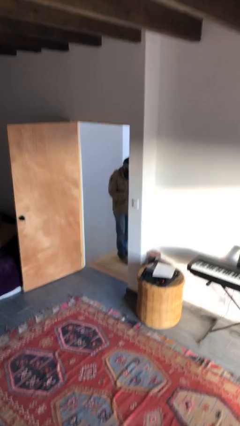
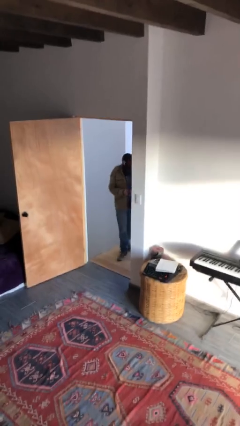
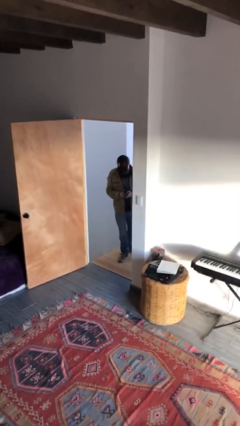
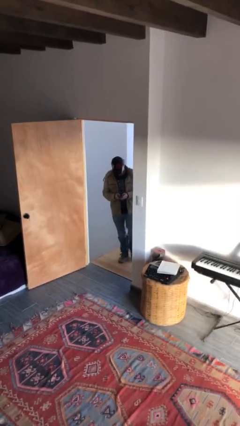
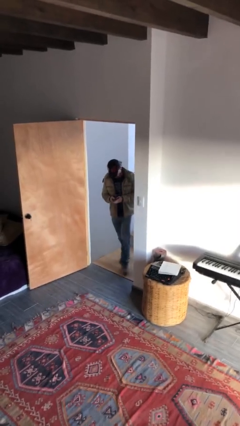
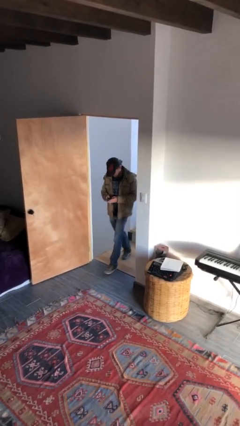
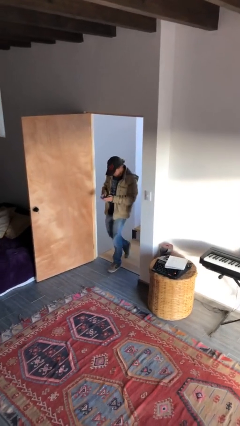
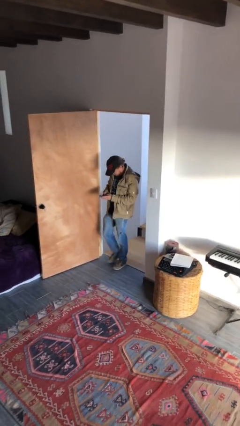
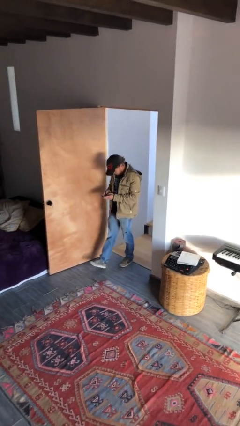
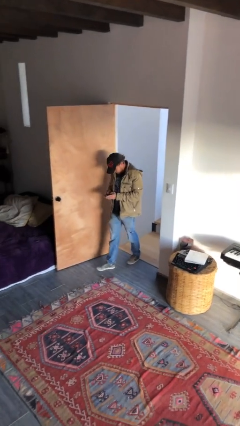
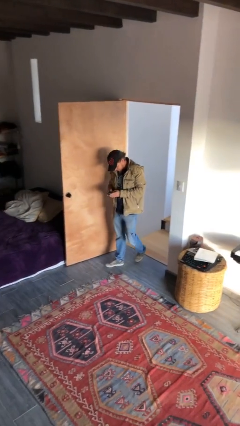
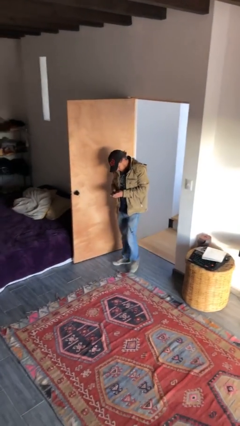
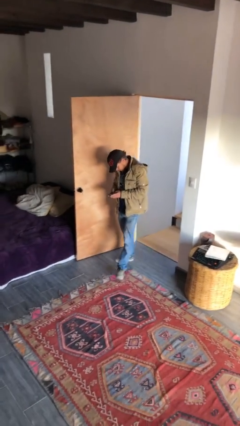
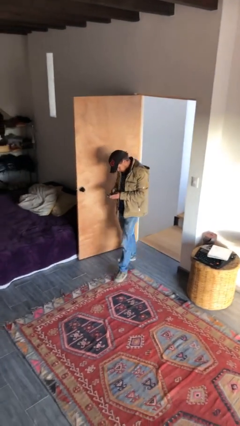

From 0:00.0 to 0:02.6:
person enters scene through structure

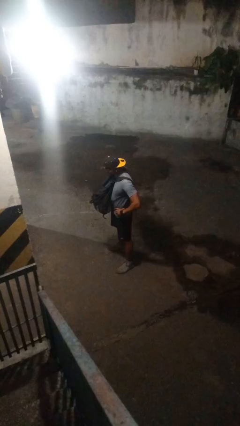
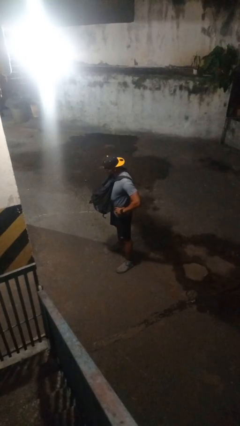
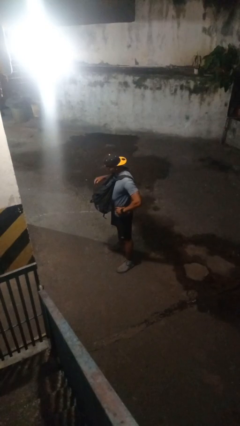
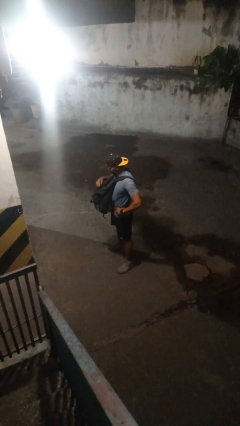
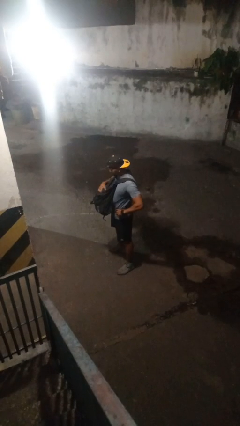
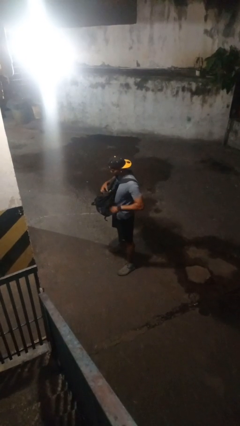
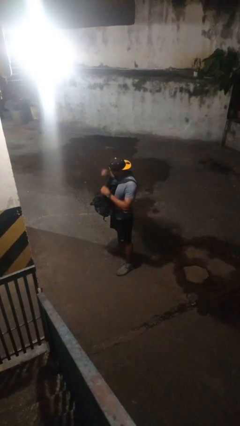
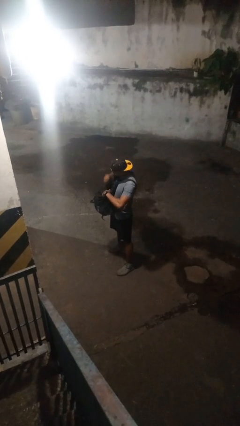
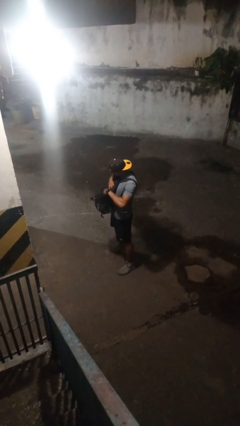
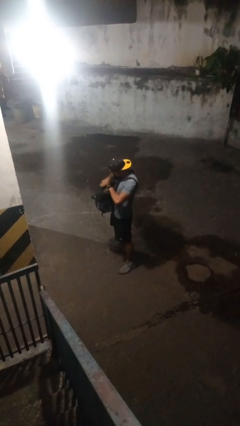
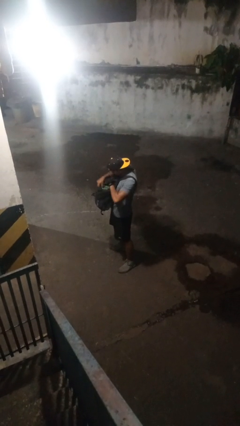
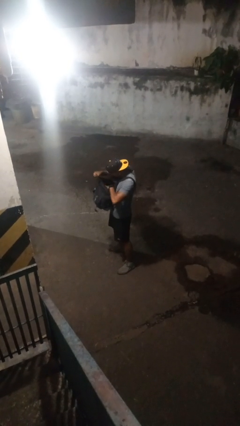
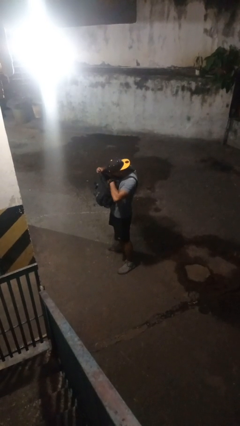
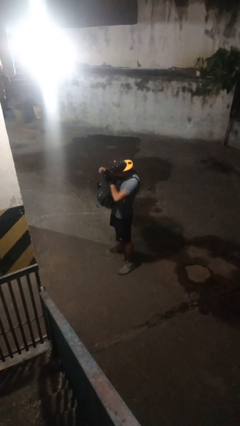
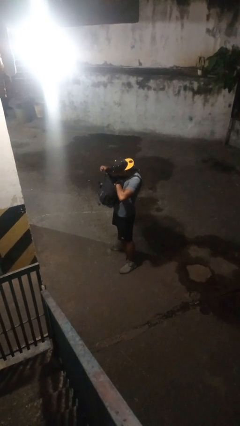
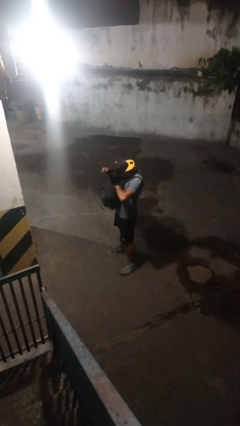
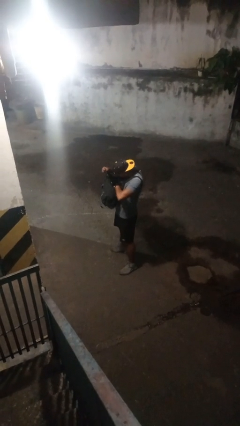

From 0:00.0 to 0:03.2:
person searches in backpack

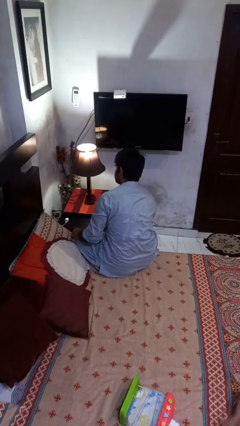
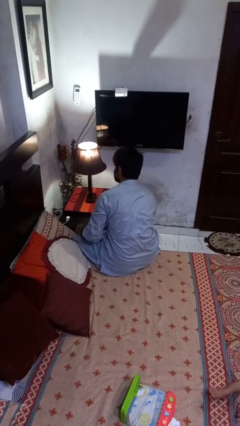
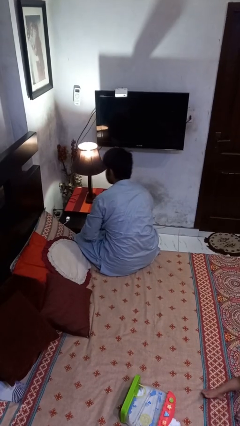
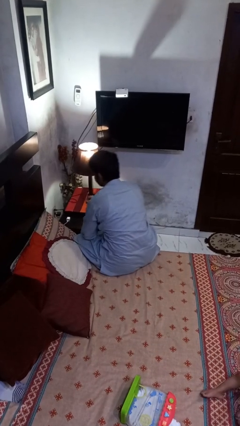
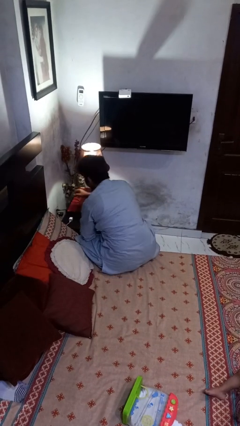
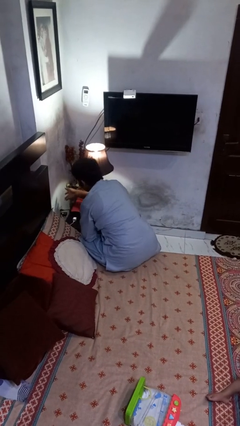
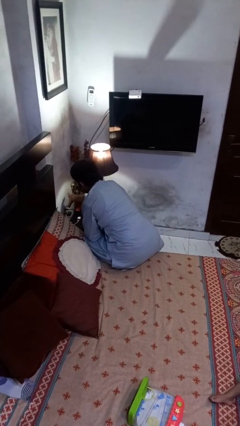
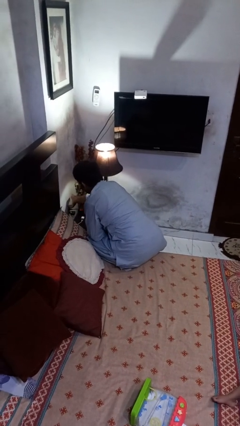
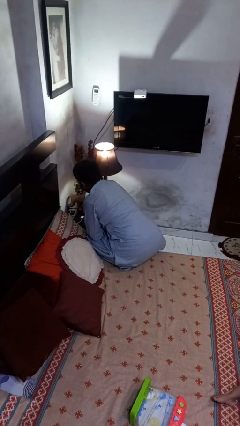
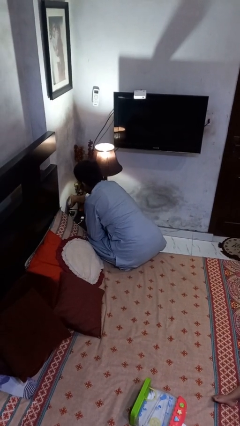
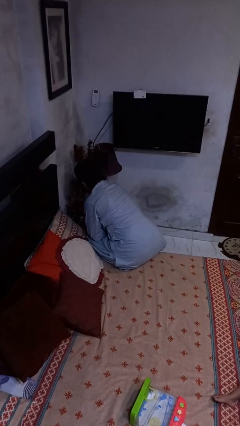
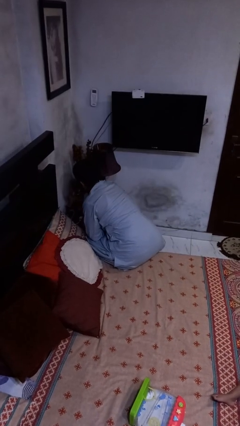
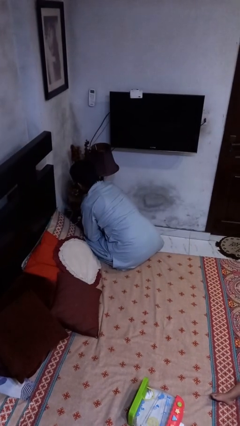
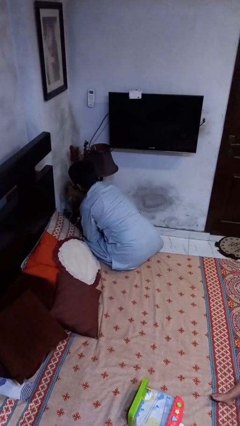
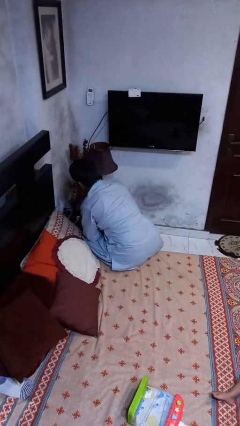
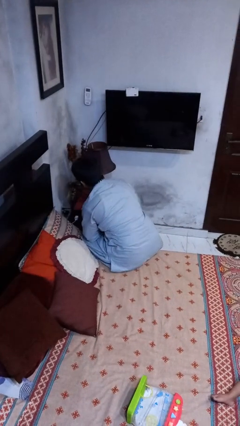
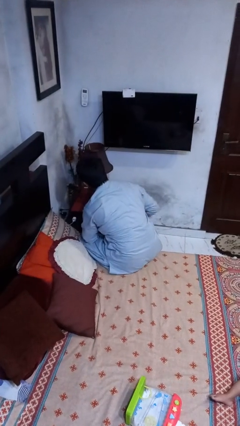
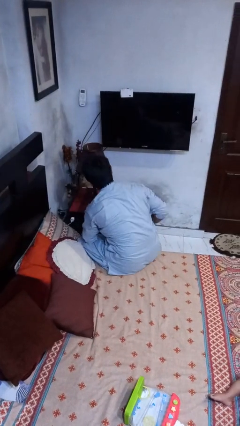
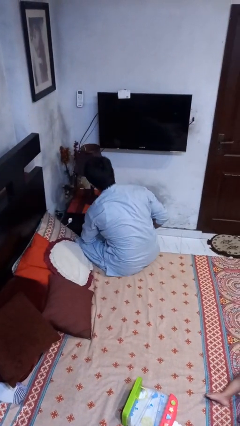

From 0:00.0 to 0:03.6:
person turns off lamp

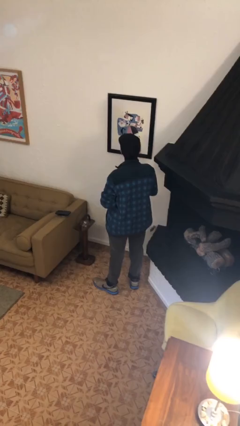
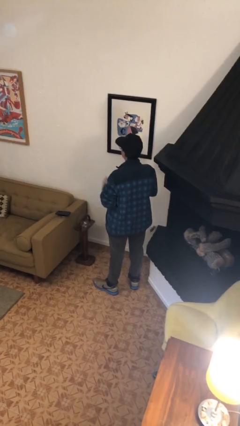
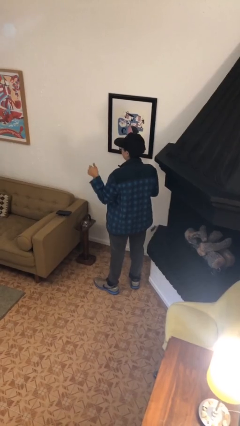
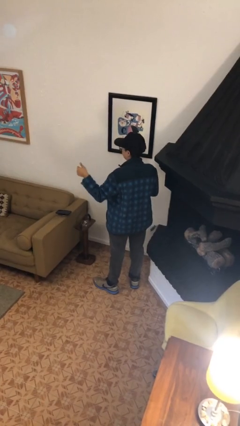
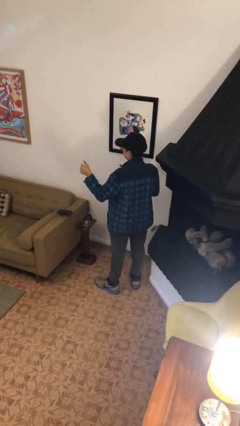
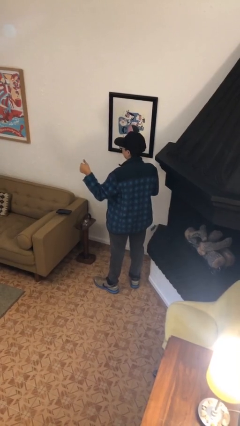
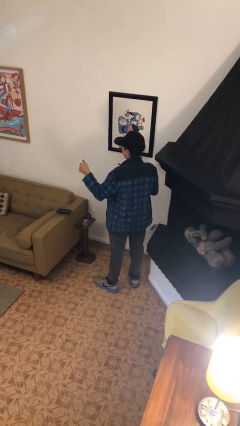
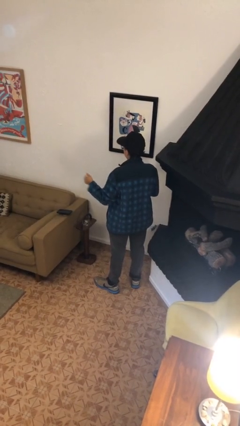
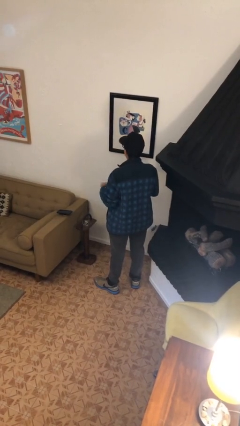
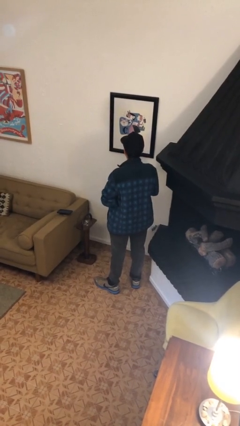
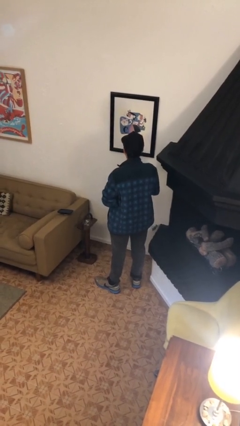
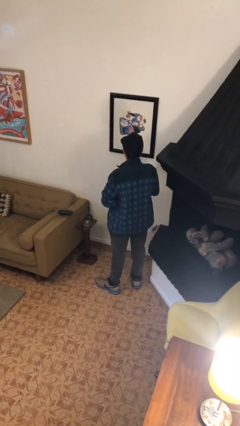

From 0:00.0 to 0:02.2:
person gestures thumbs up

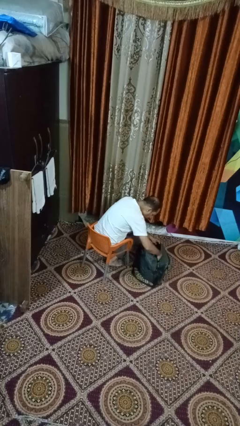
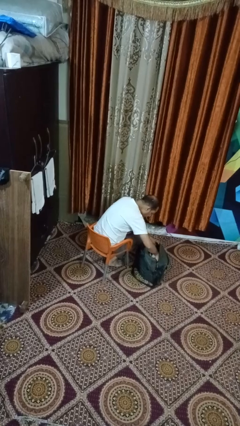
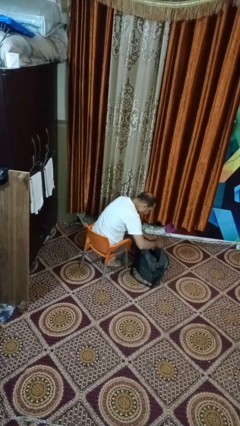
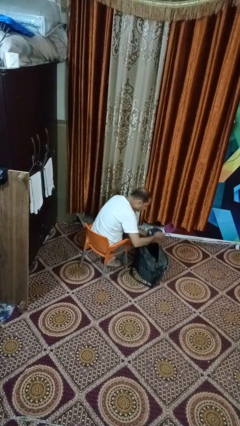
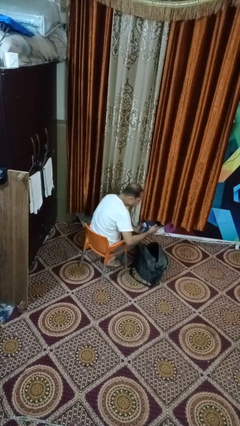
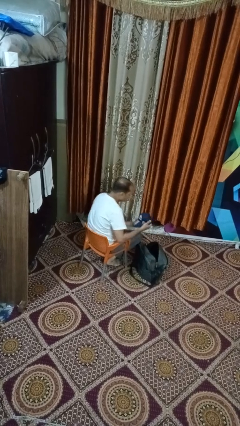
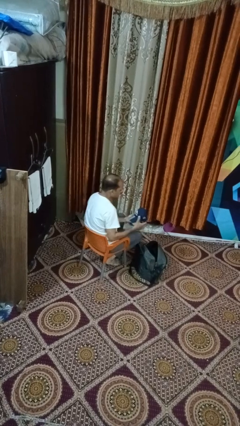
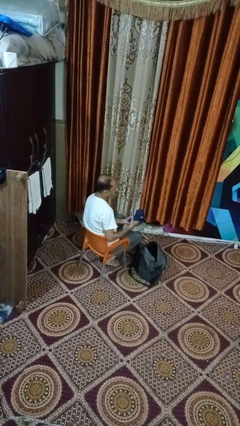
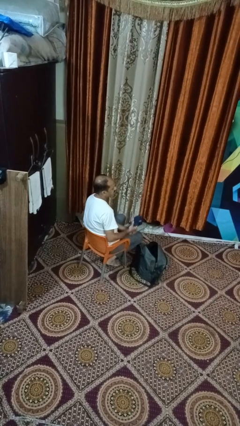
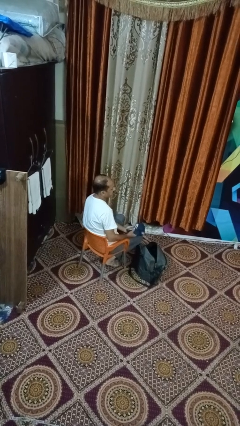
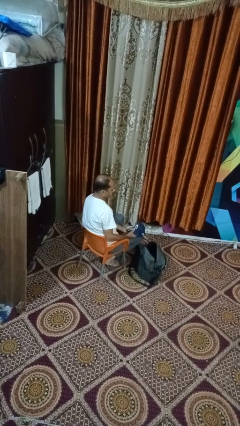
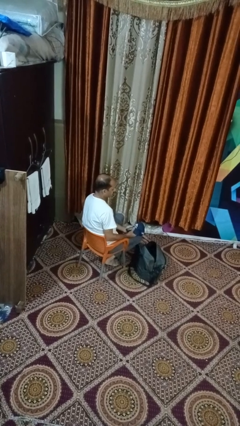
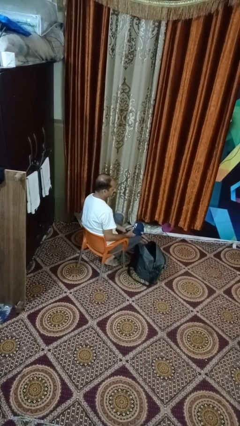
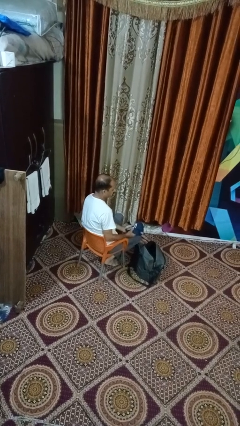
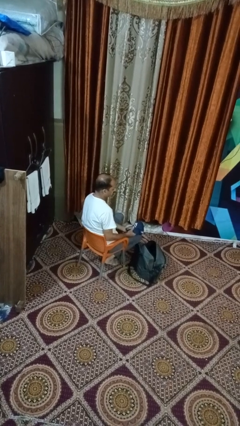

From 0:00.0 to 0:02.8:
person takes object from backpack

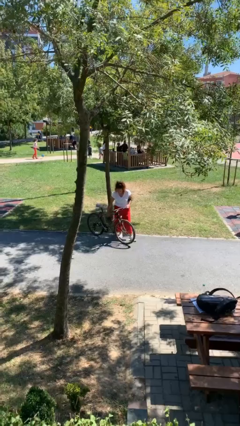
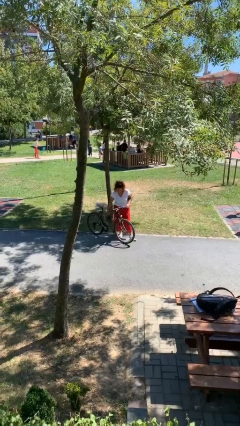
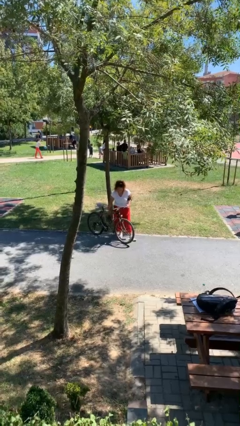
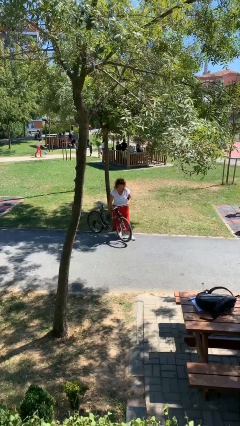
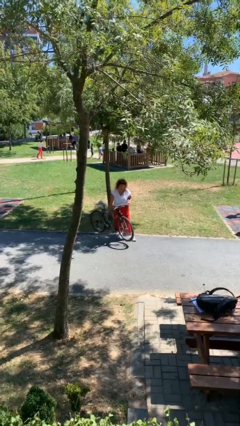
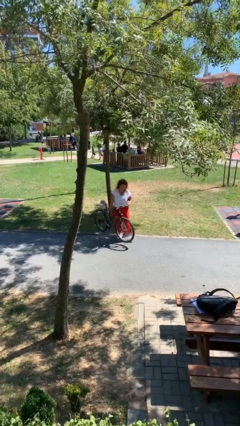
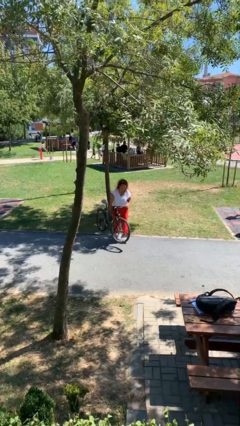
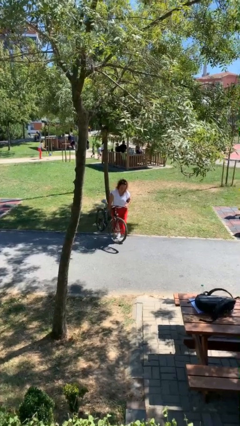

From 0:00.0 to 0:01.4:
person picks up object from floor

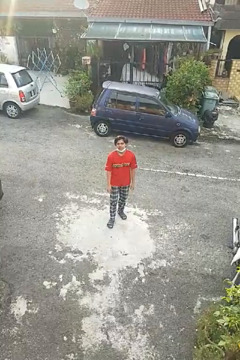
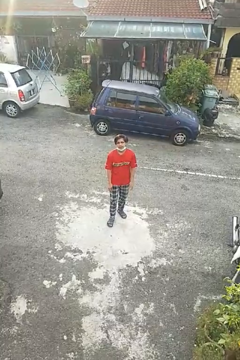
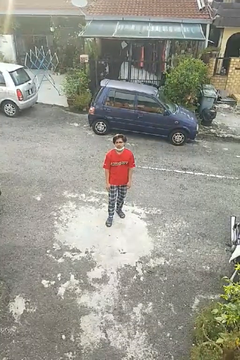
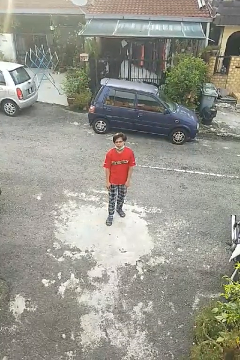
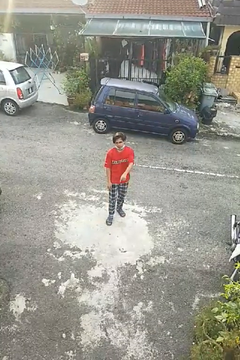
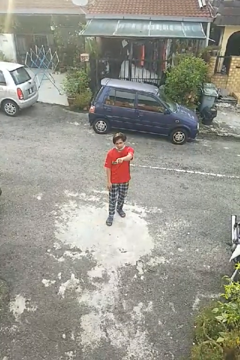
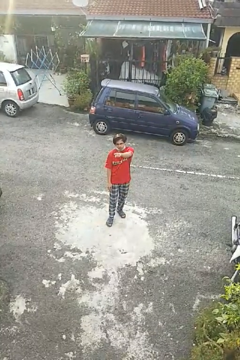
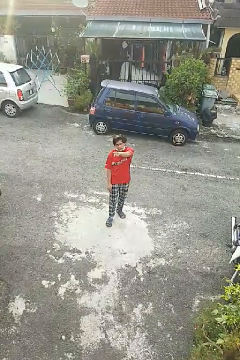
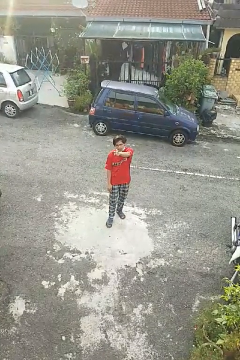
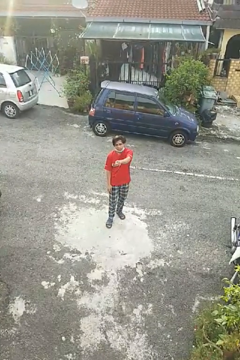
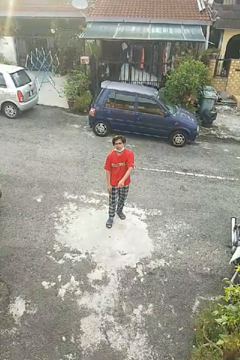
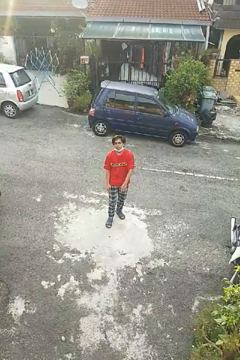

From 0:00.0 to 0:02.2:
person points at person
